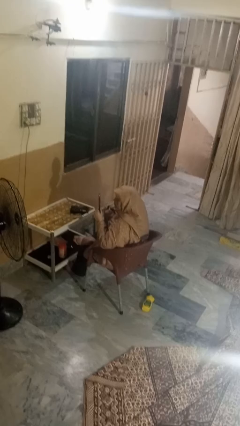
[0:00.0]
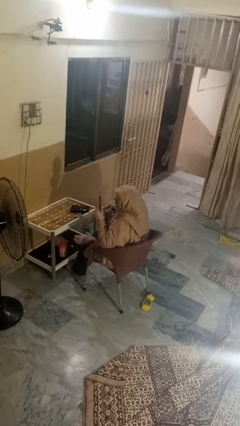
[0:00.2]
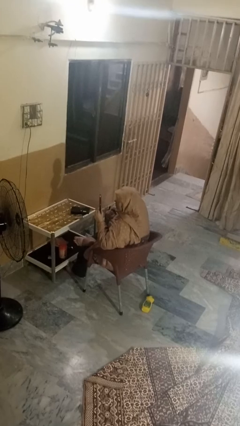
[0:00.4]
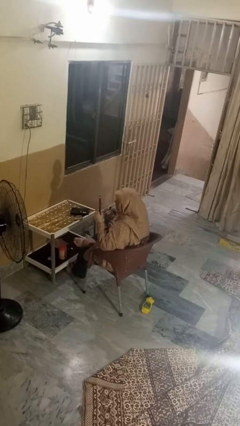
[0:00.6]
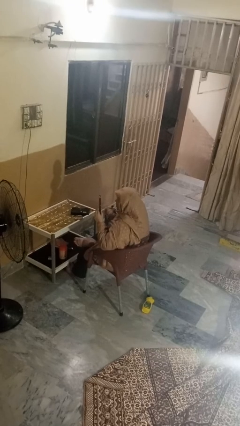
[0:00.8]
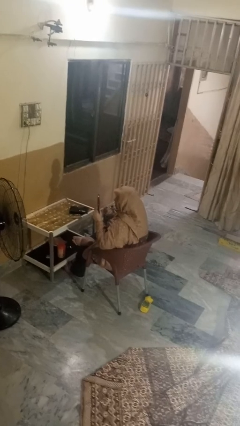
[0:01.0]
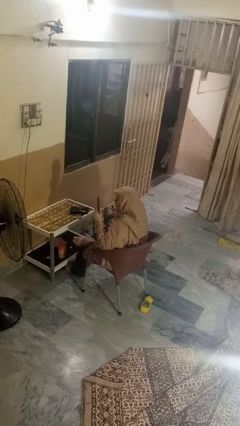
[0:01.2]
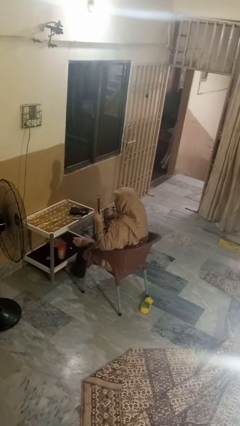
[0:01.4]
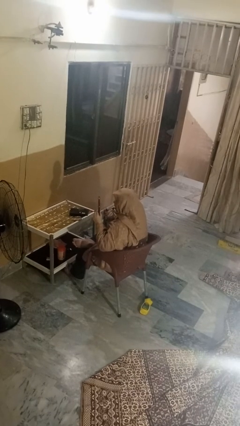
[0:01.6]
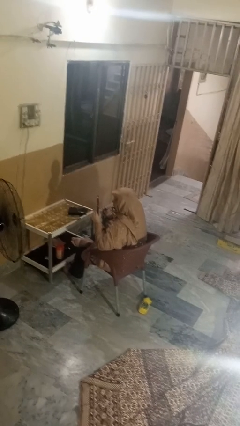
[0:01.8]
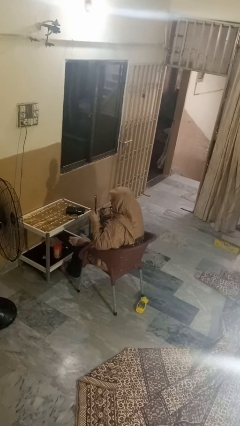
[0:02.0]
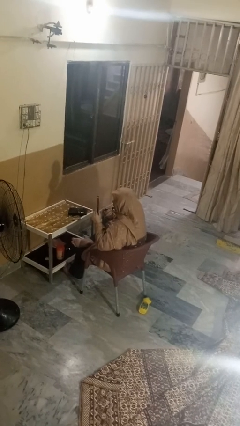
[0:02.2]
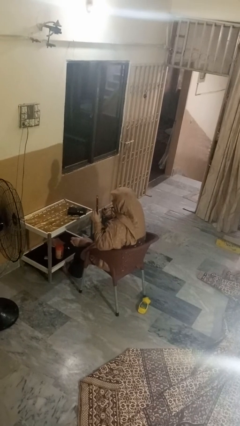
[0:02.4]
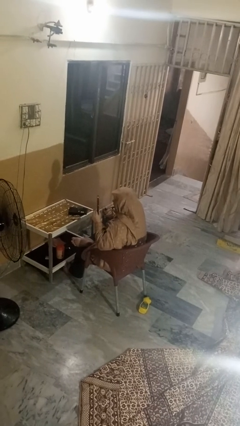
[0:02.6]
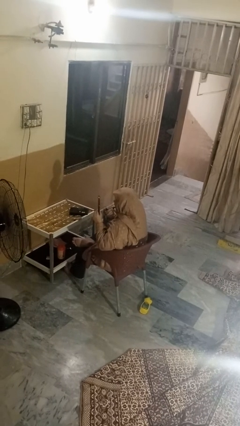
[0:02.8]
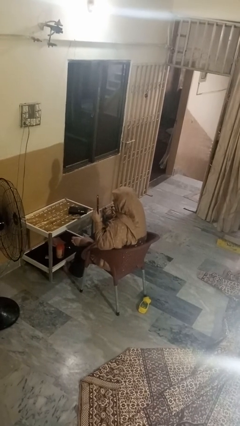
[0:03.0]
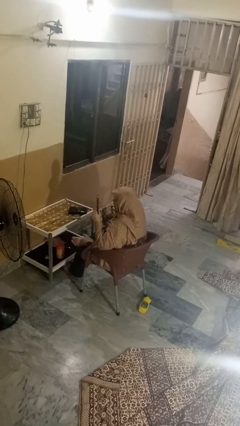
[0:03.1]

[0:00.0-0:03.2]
person applies lip makeup

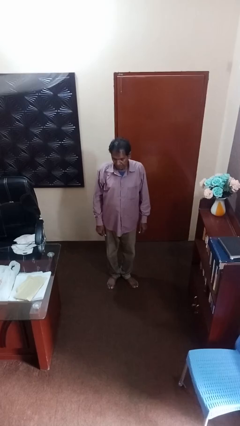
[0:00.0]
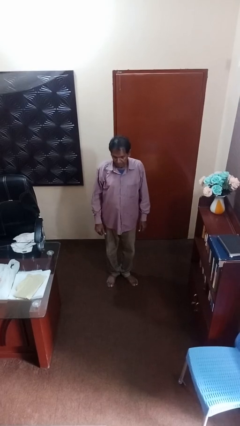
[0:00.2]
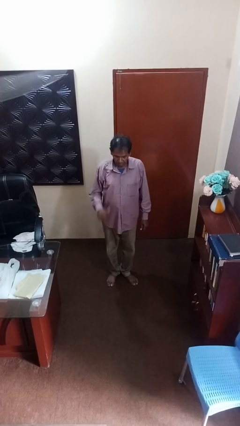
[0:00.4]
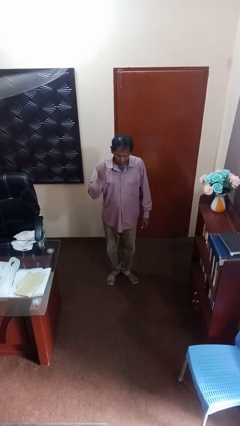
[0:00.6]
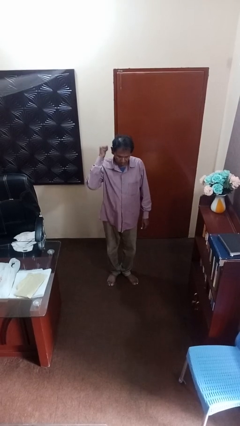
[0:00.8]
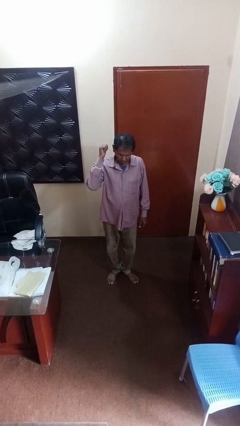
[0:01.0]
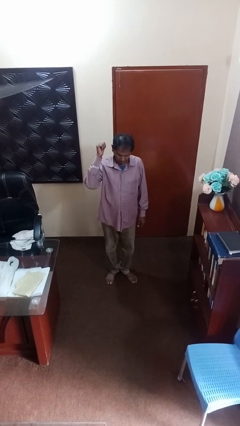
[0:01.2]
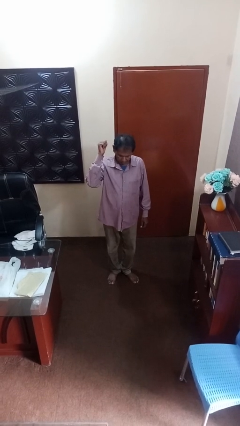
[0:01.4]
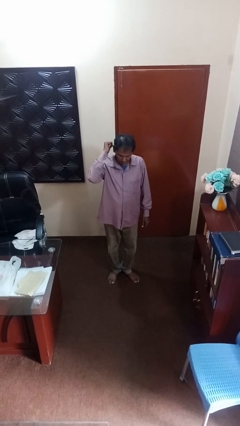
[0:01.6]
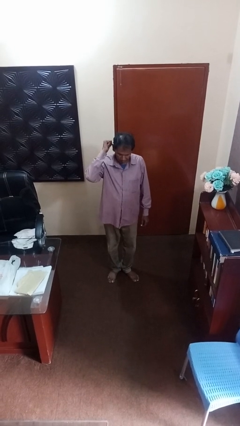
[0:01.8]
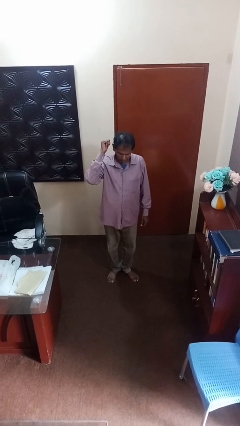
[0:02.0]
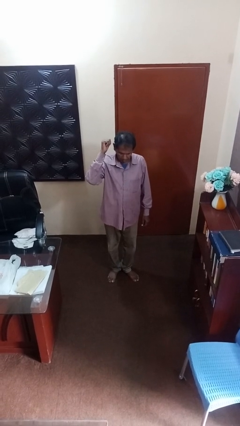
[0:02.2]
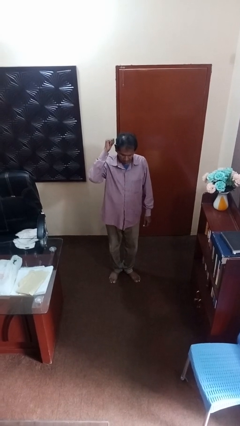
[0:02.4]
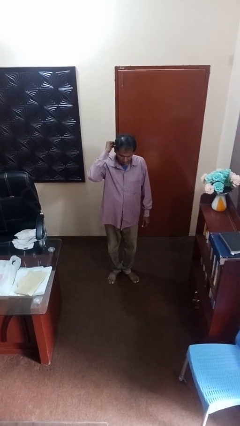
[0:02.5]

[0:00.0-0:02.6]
person gestures arms x

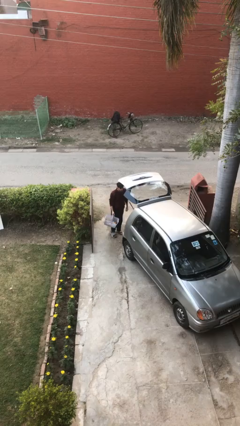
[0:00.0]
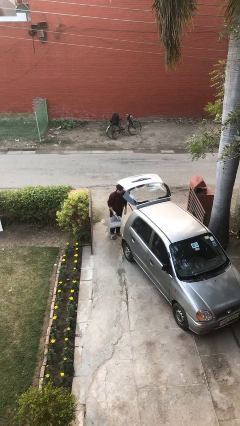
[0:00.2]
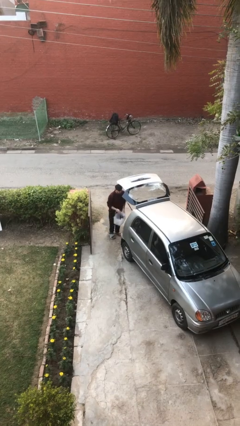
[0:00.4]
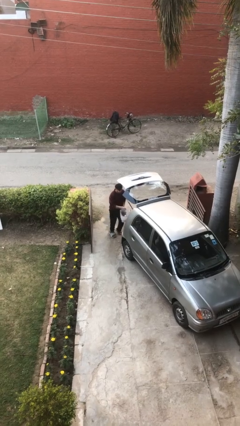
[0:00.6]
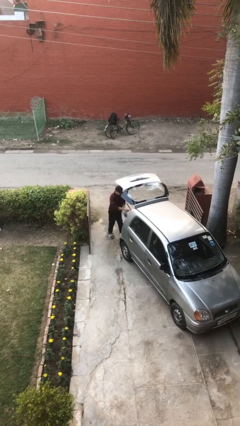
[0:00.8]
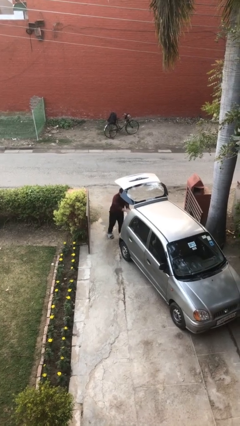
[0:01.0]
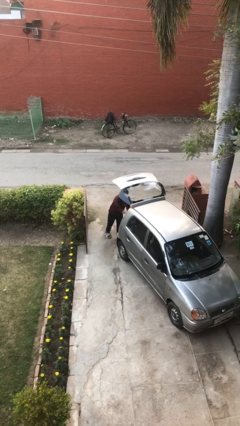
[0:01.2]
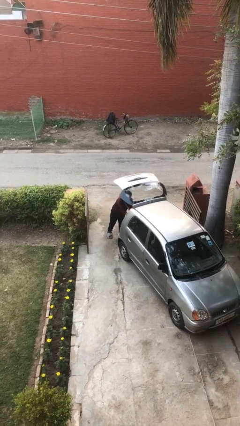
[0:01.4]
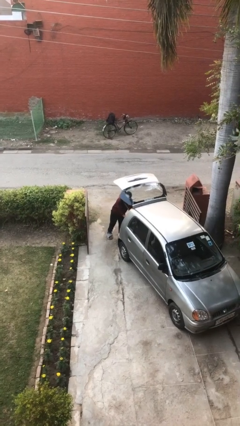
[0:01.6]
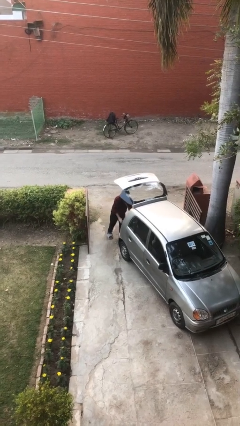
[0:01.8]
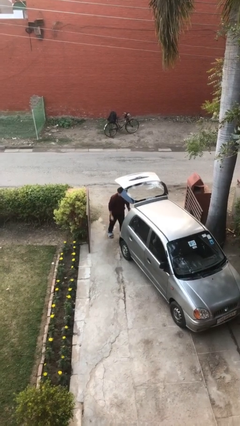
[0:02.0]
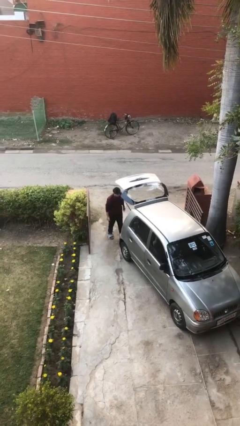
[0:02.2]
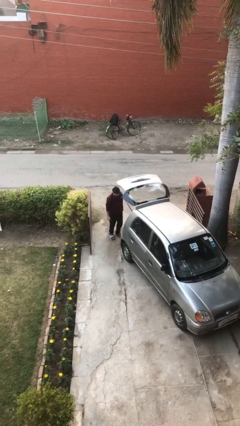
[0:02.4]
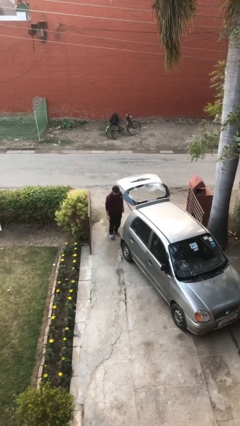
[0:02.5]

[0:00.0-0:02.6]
person loads car

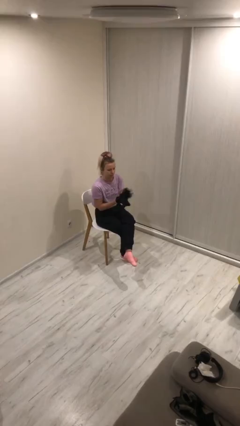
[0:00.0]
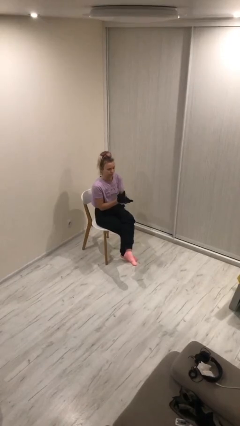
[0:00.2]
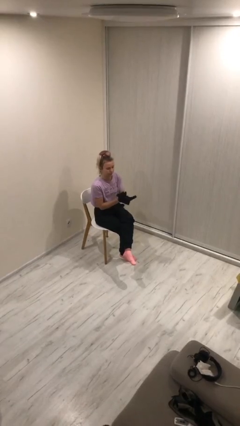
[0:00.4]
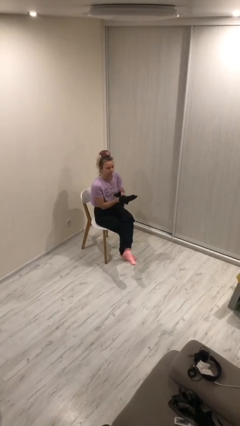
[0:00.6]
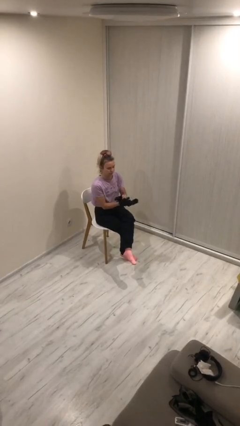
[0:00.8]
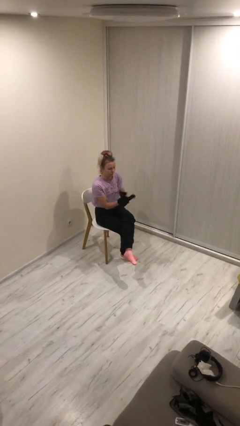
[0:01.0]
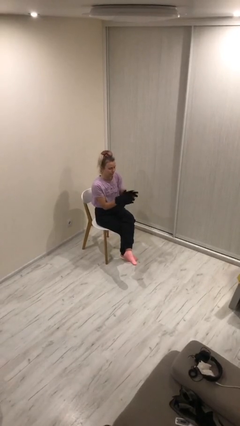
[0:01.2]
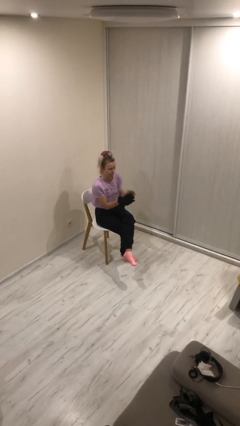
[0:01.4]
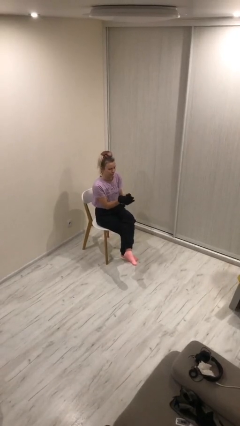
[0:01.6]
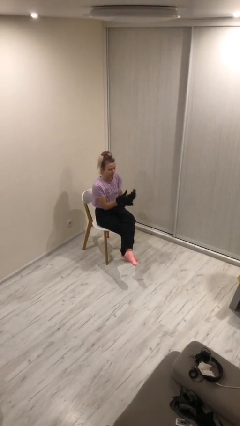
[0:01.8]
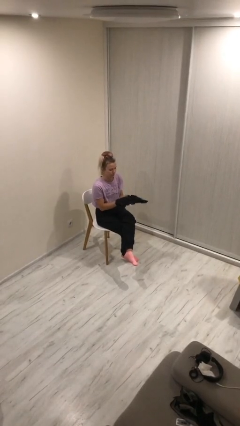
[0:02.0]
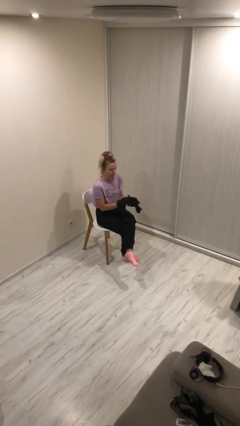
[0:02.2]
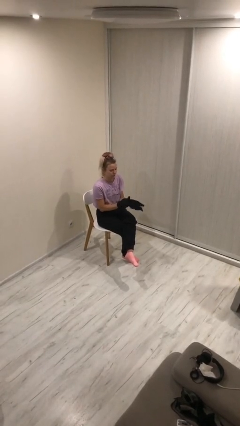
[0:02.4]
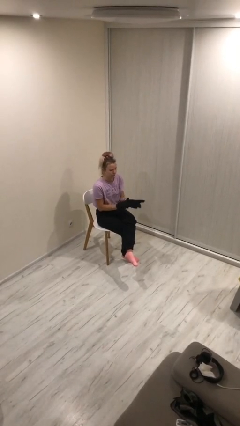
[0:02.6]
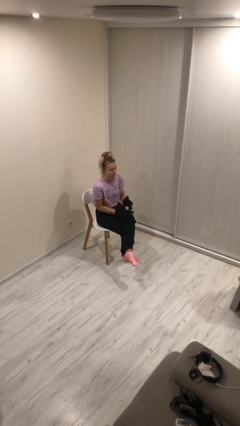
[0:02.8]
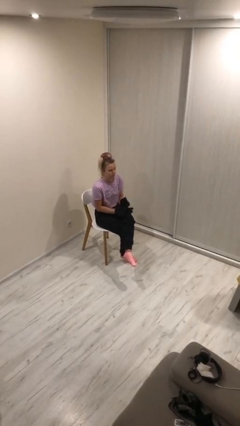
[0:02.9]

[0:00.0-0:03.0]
person puts on gloves

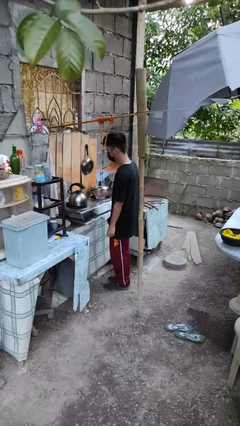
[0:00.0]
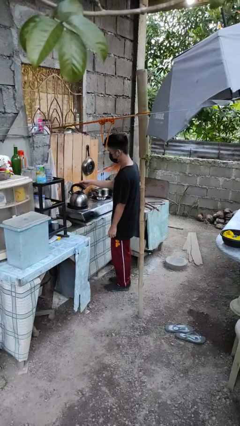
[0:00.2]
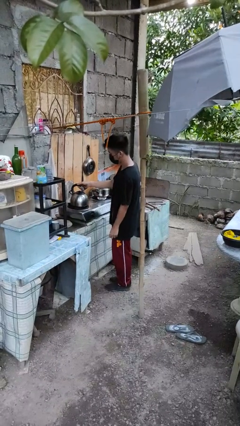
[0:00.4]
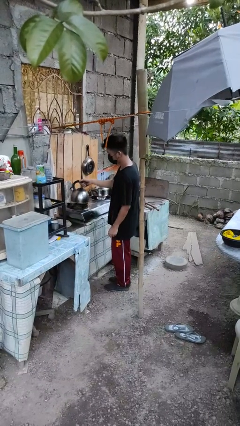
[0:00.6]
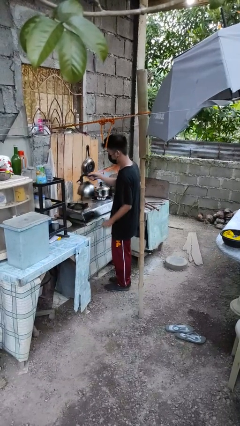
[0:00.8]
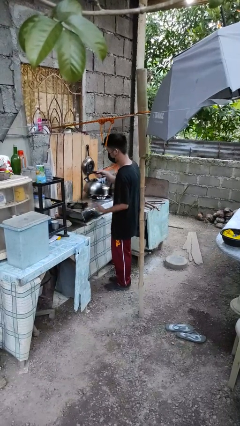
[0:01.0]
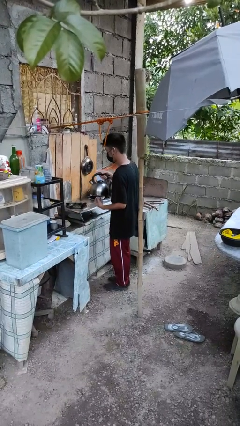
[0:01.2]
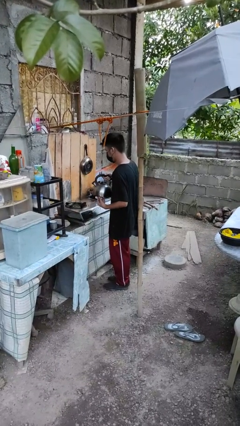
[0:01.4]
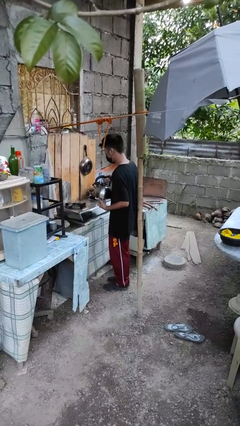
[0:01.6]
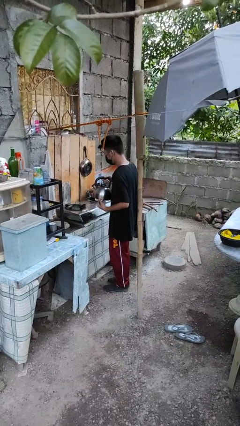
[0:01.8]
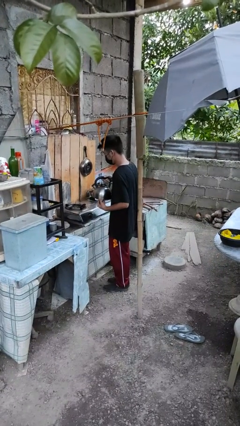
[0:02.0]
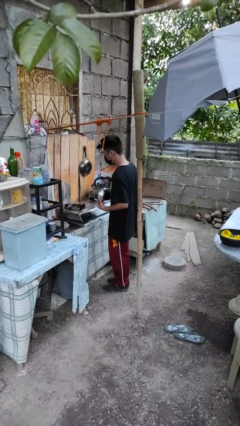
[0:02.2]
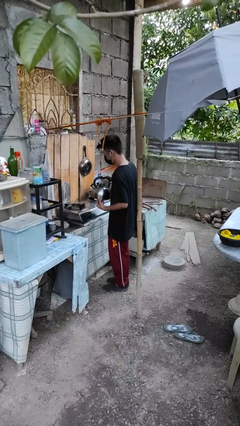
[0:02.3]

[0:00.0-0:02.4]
person picks up object from countertop

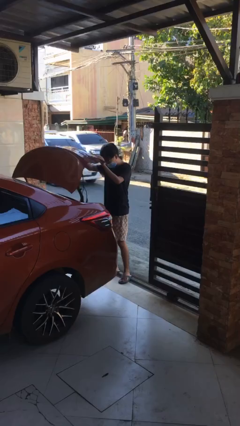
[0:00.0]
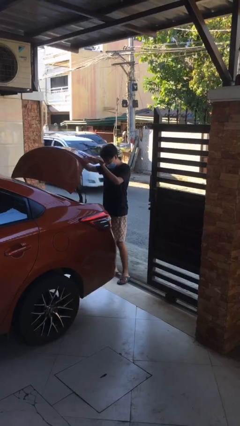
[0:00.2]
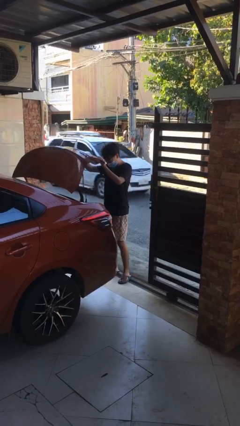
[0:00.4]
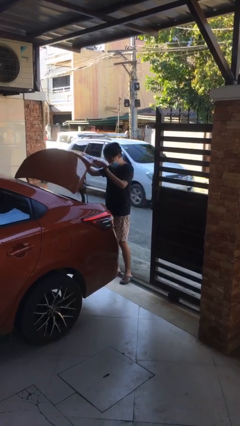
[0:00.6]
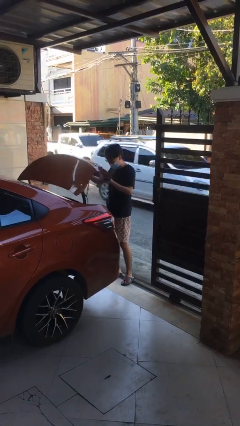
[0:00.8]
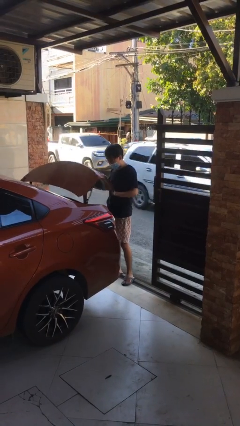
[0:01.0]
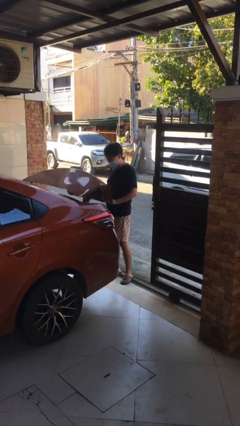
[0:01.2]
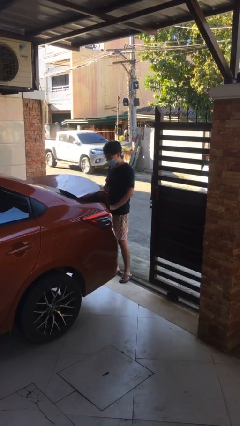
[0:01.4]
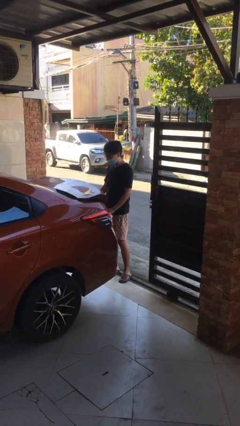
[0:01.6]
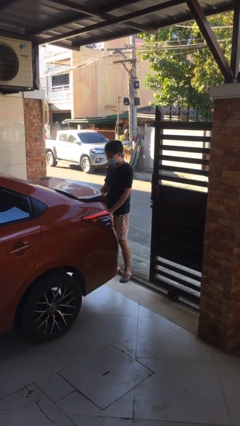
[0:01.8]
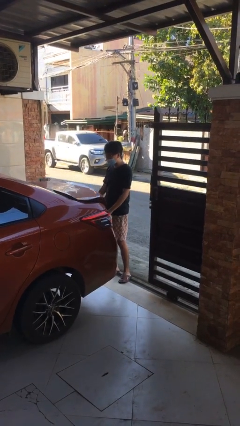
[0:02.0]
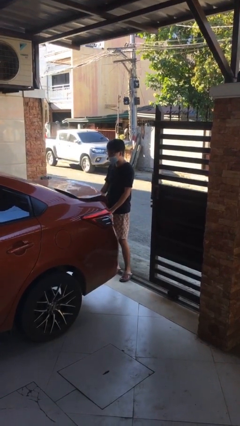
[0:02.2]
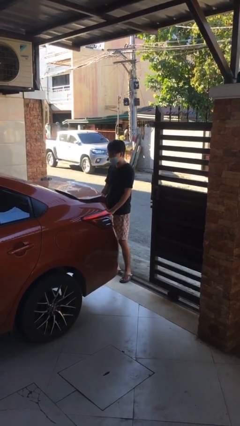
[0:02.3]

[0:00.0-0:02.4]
person closes car trunk

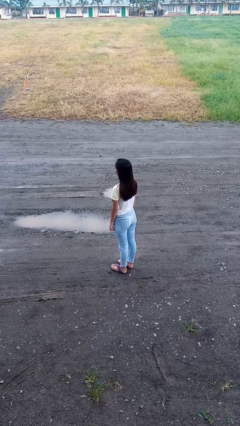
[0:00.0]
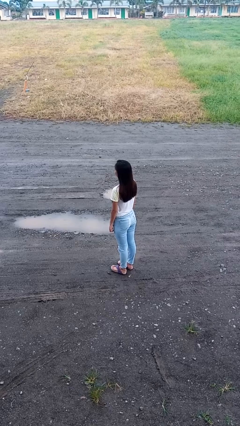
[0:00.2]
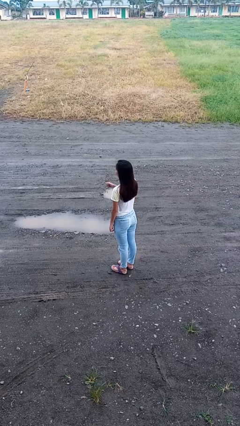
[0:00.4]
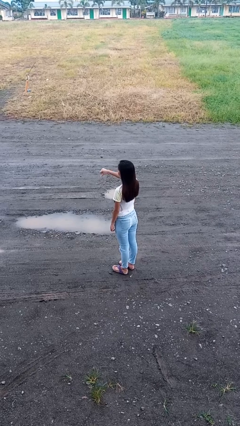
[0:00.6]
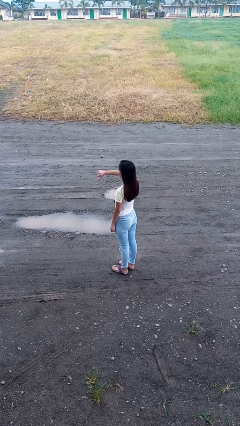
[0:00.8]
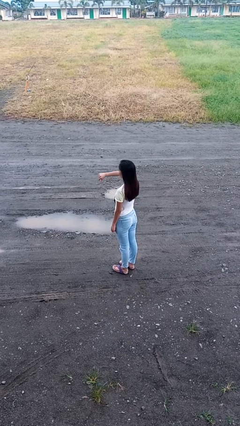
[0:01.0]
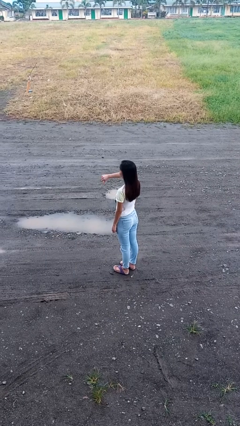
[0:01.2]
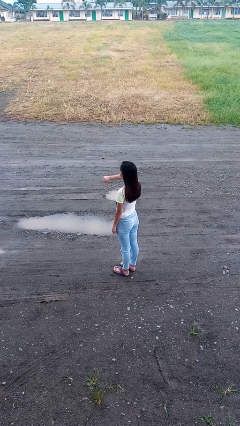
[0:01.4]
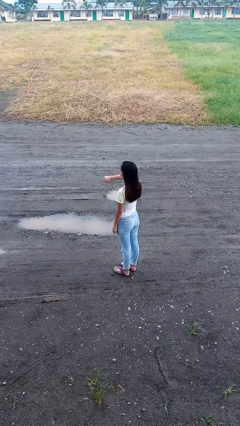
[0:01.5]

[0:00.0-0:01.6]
person gestures thumbs down
